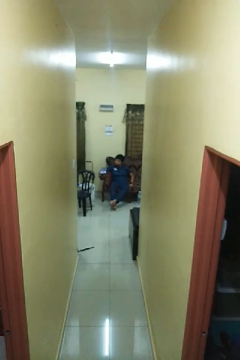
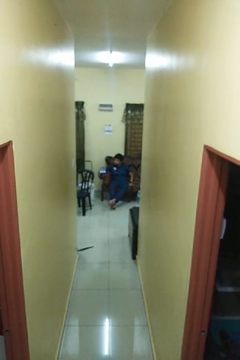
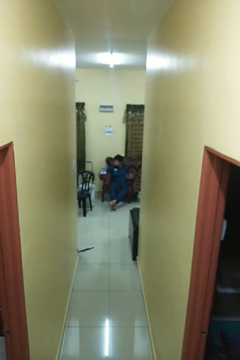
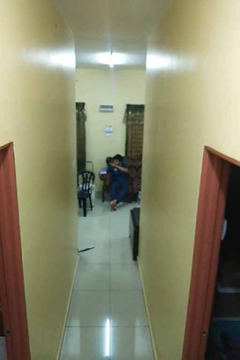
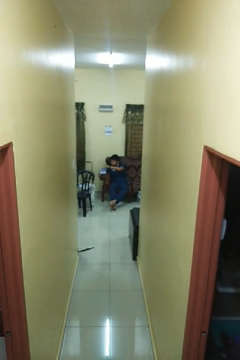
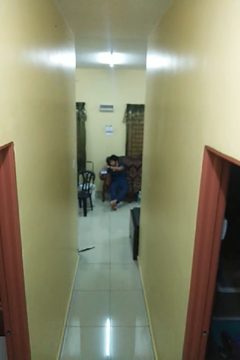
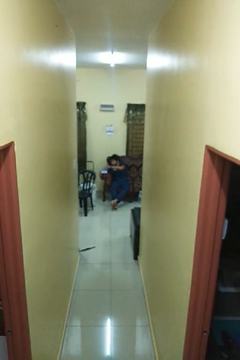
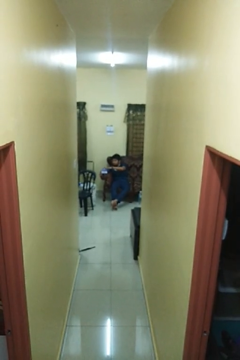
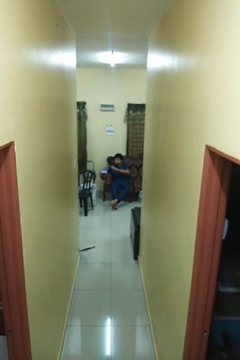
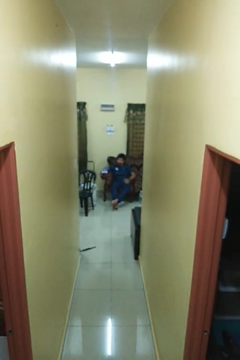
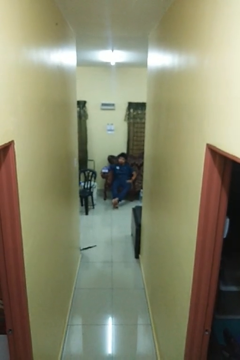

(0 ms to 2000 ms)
person taps object with finger

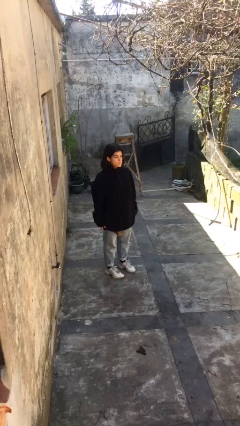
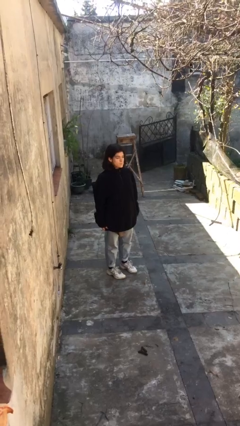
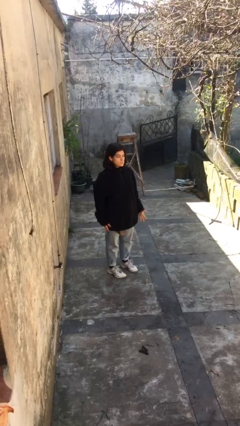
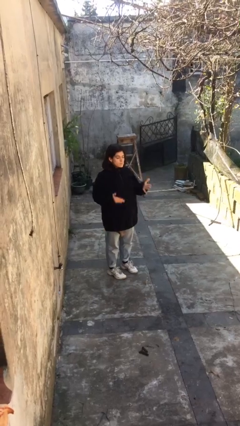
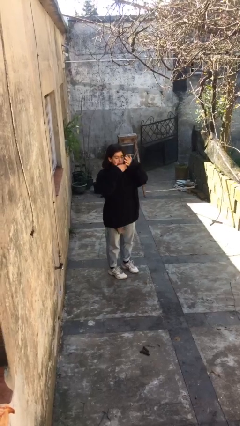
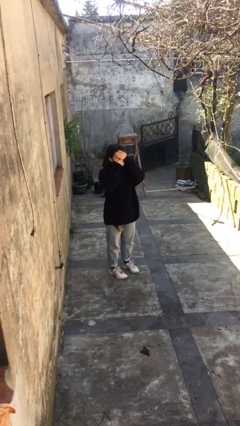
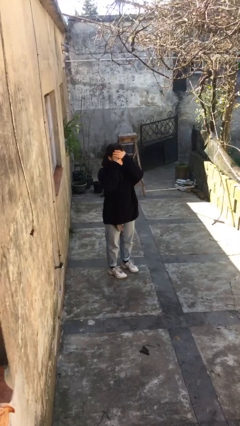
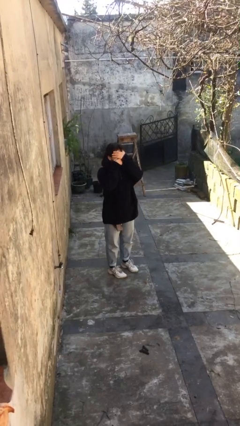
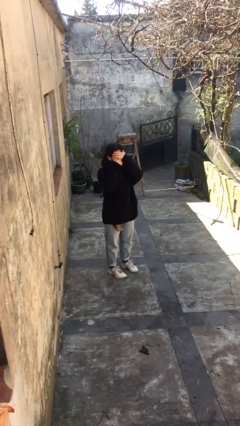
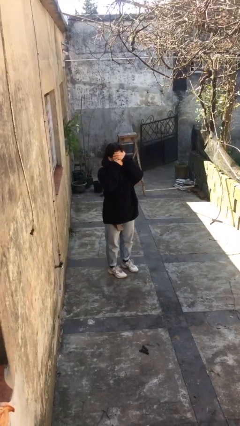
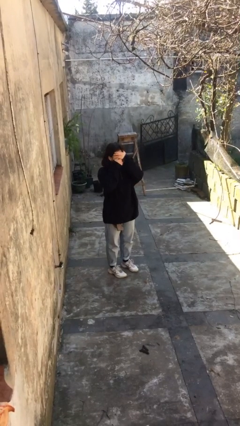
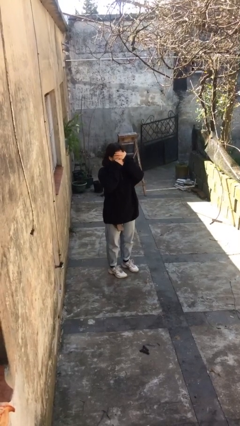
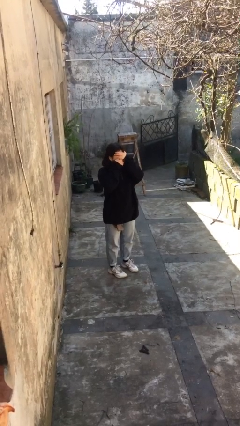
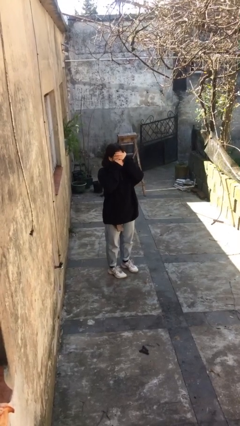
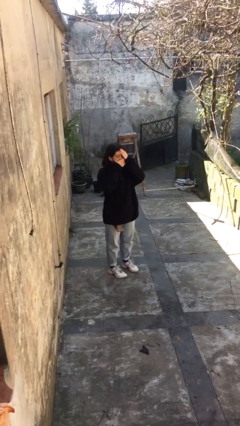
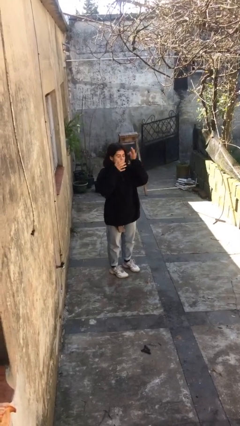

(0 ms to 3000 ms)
person covers face with hands

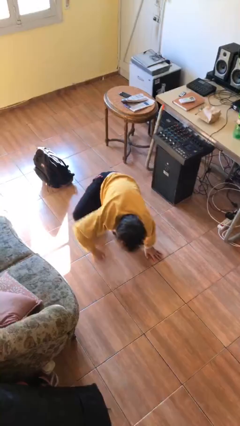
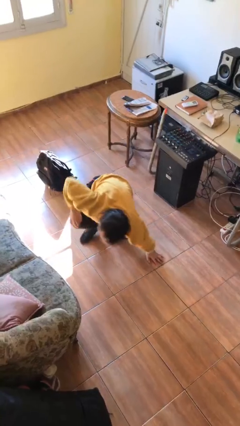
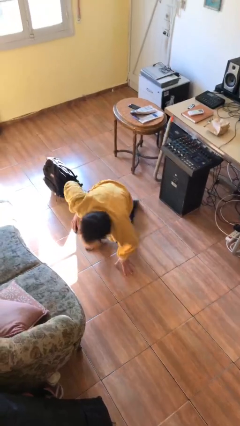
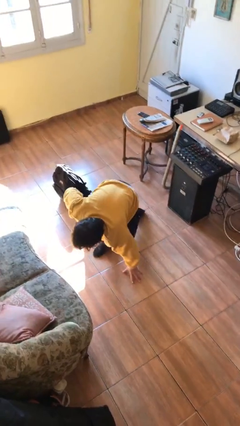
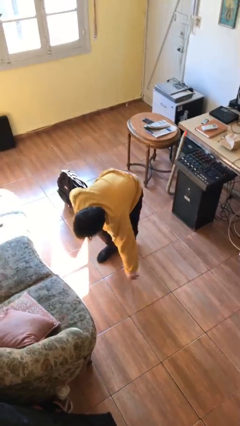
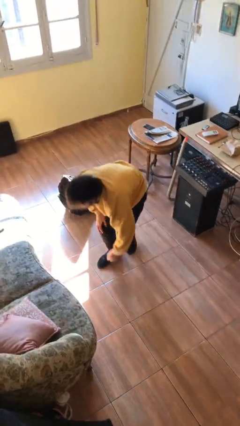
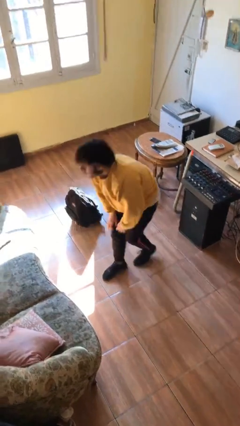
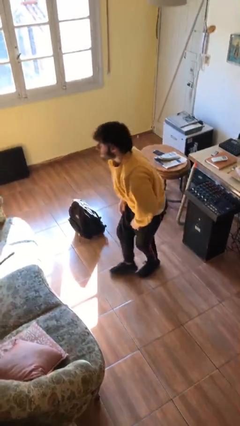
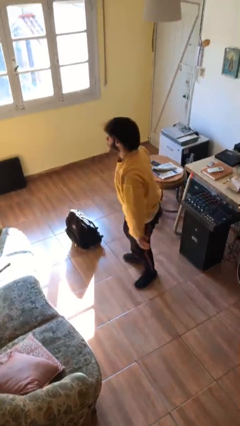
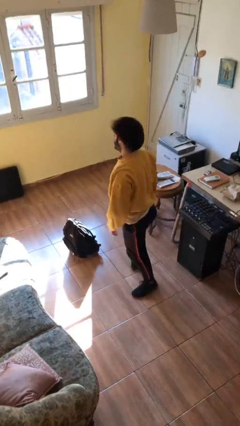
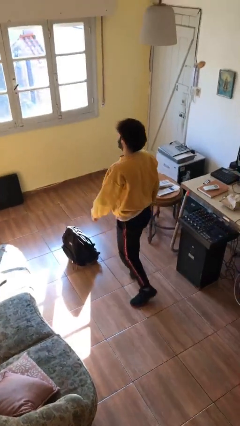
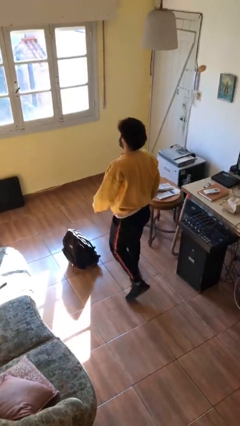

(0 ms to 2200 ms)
person stands up from floor

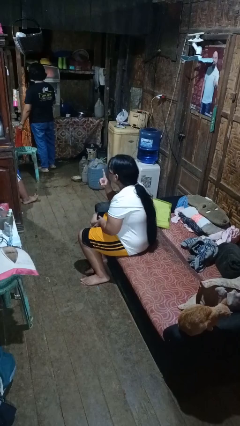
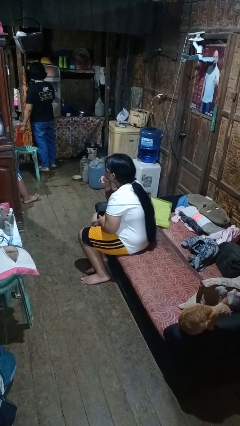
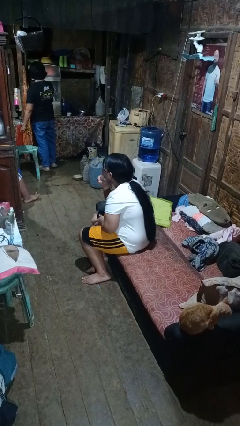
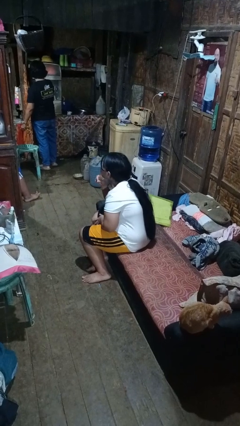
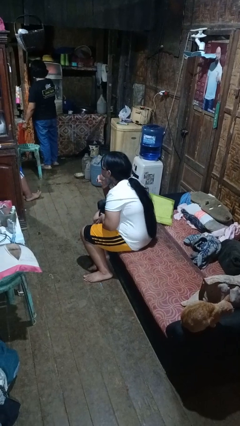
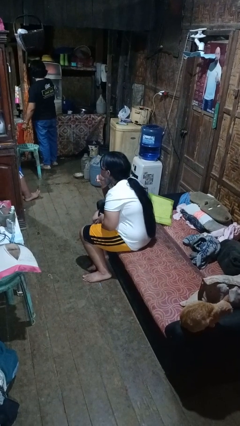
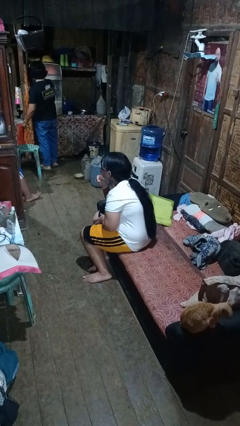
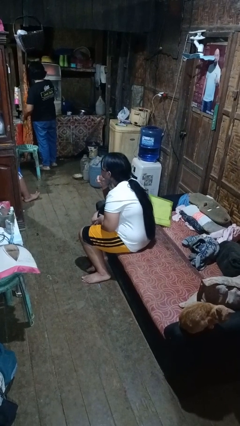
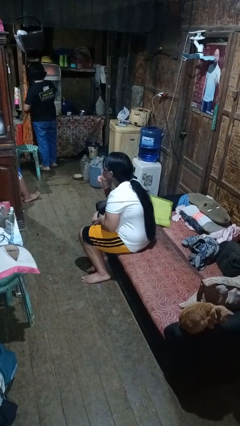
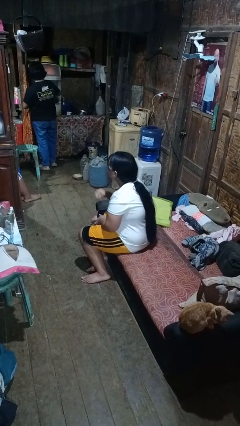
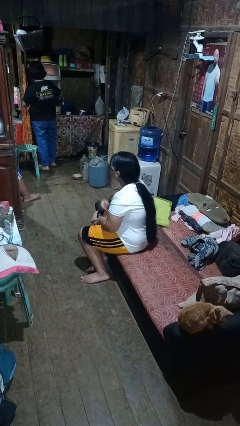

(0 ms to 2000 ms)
person gestures be quiet

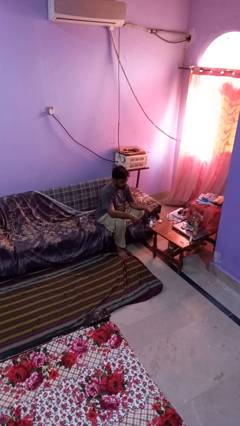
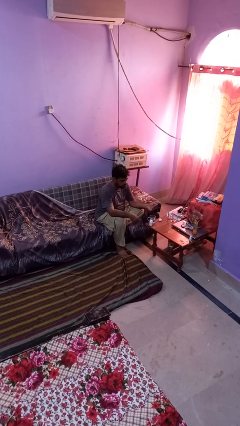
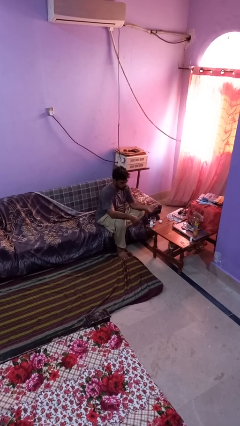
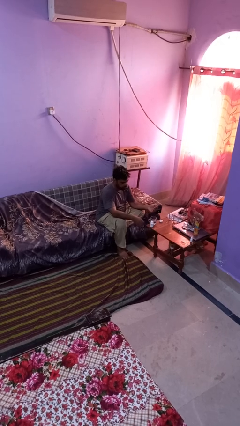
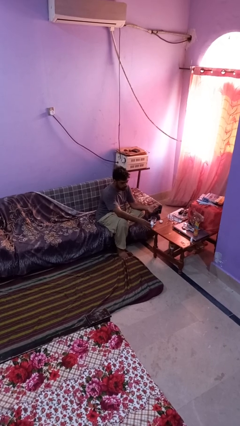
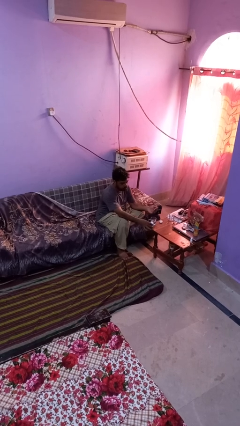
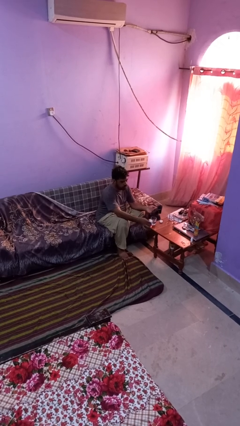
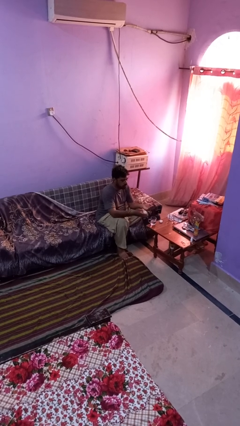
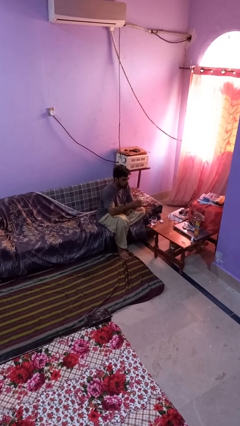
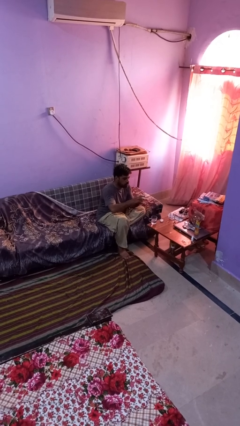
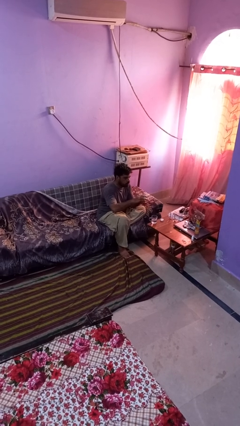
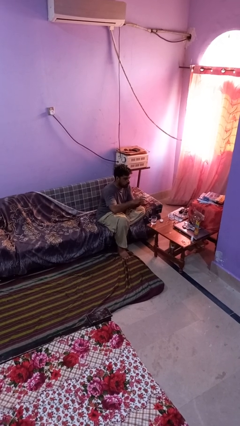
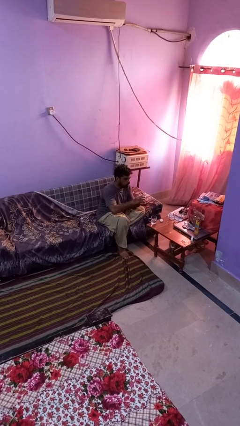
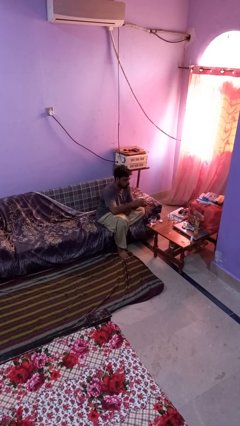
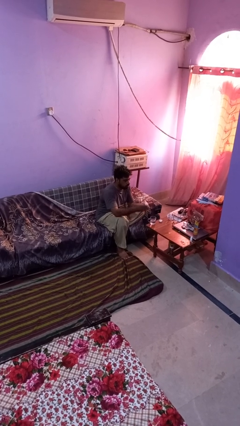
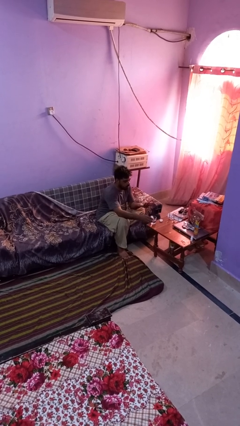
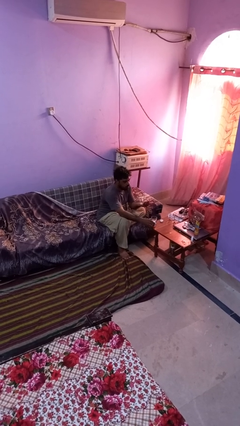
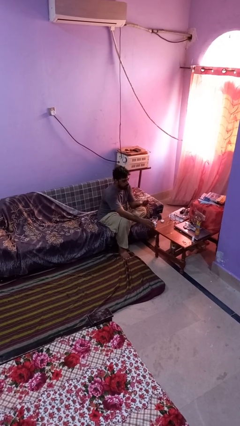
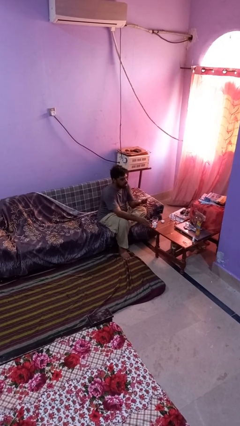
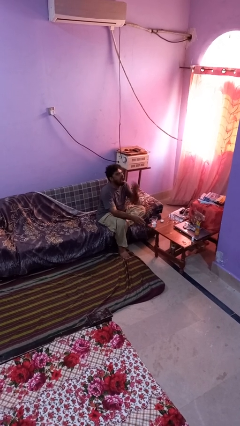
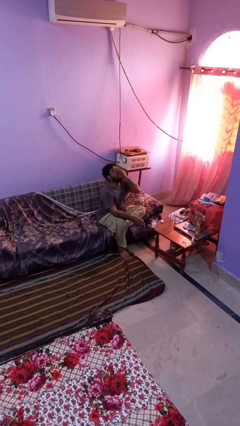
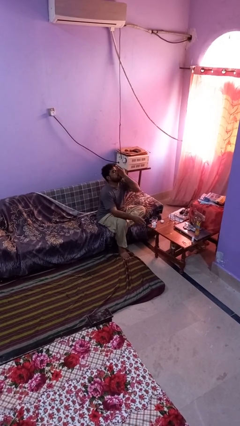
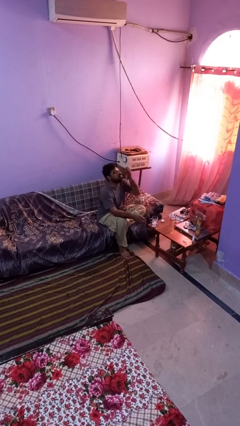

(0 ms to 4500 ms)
person takes medicine pills

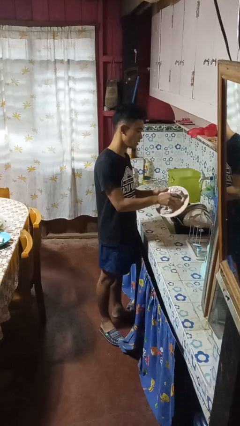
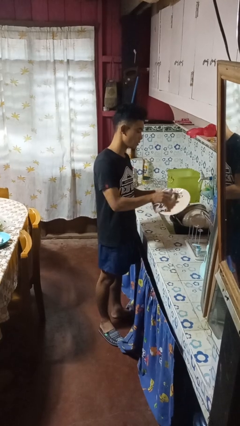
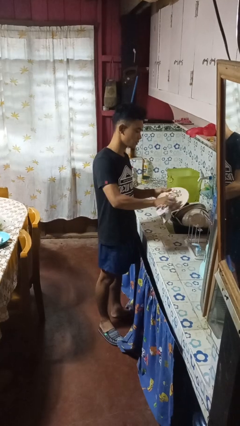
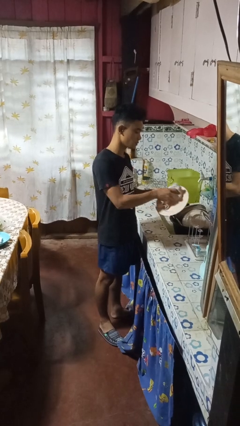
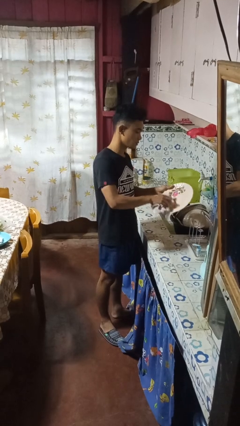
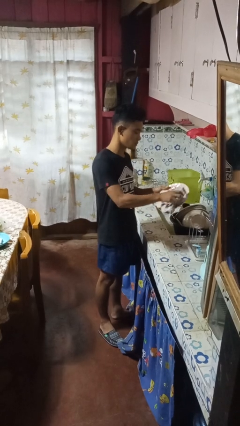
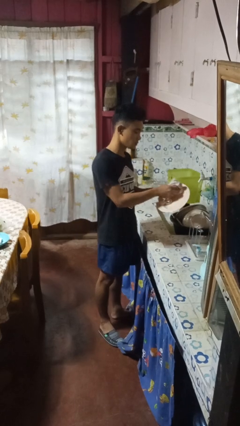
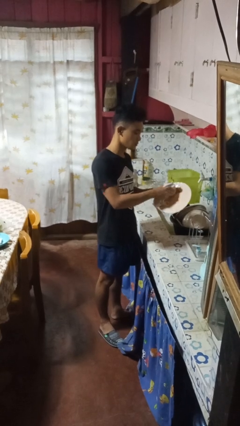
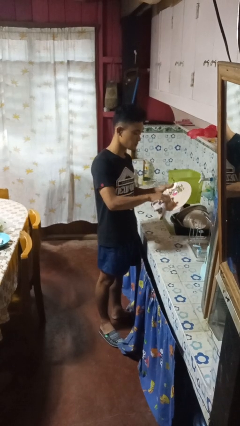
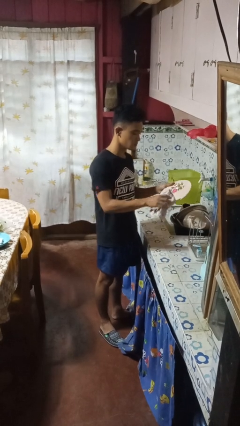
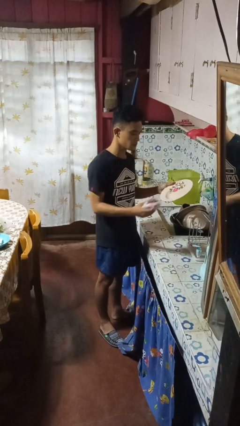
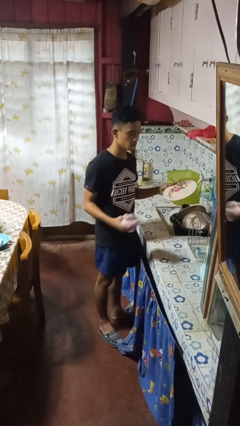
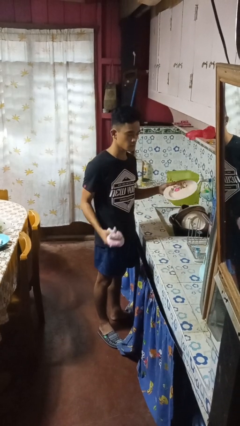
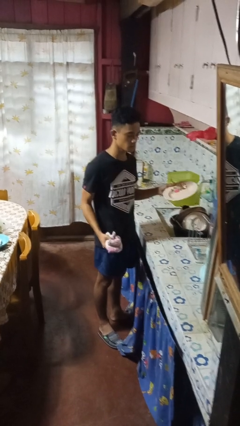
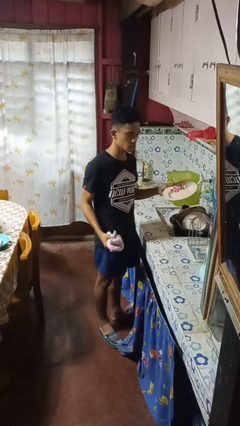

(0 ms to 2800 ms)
person dries dish

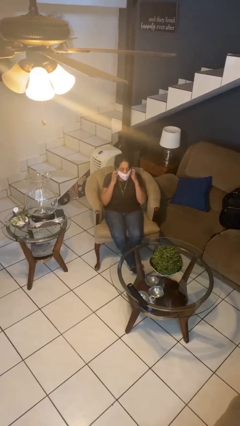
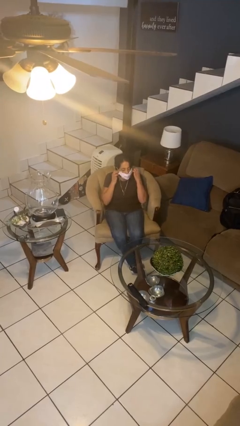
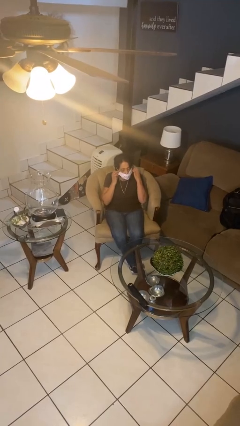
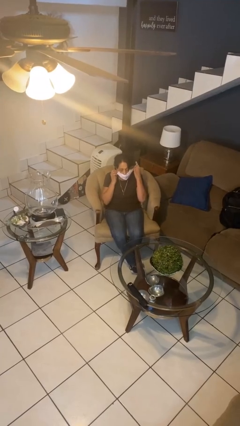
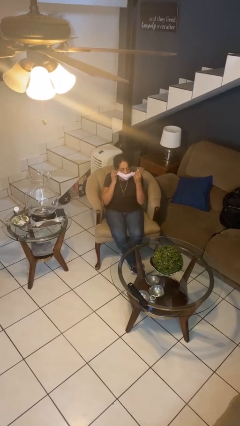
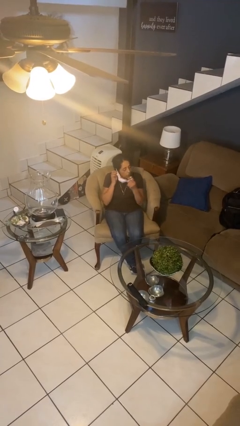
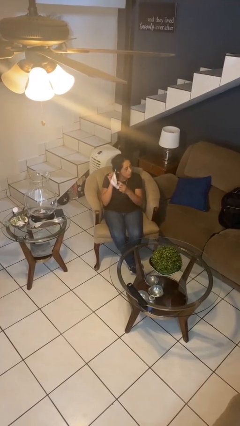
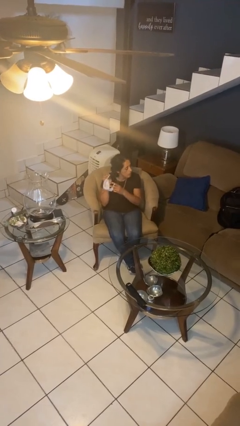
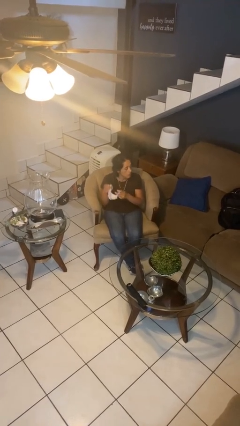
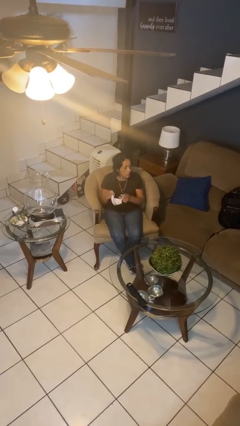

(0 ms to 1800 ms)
person takes off facemask
